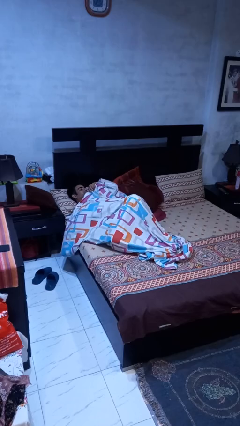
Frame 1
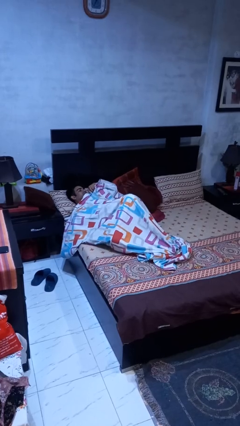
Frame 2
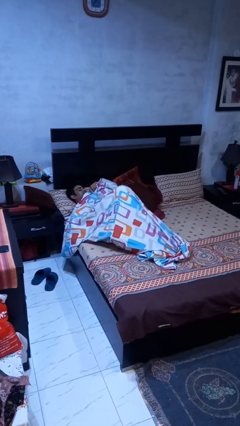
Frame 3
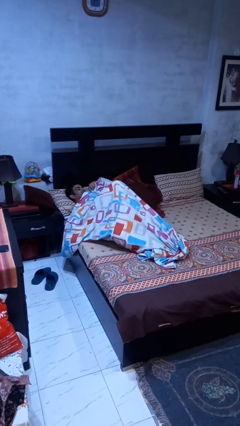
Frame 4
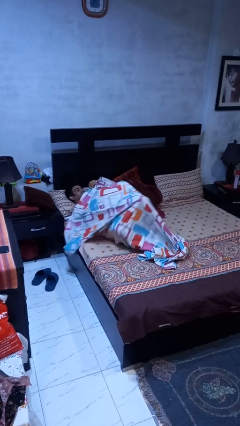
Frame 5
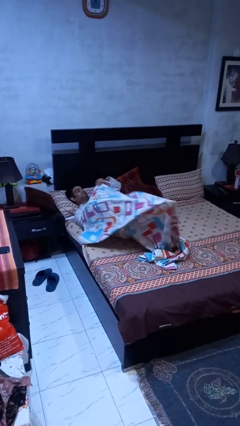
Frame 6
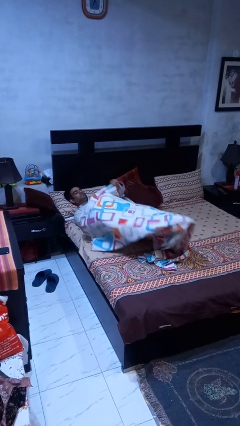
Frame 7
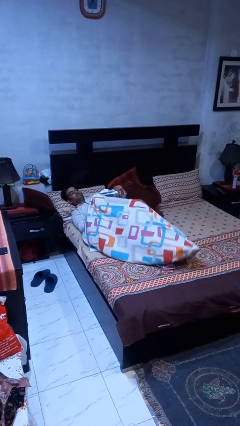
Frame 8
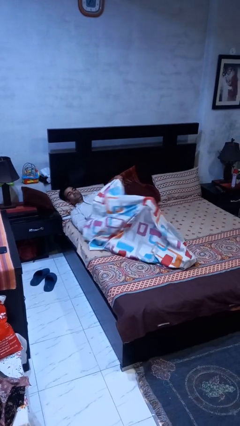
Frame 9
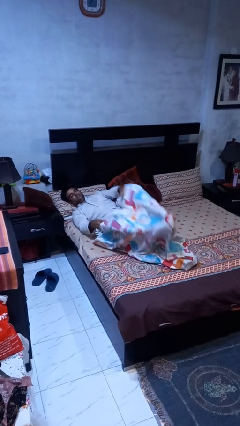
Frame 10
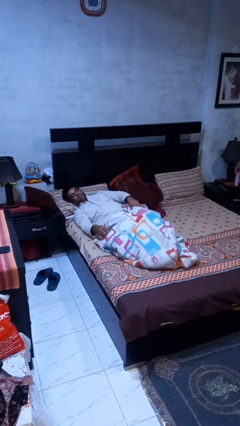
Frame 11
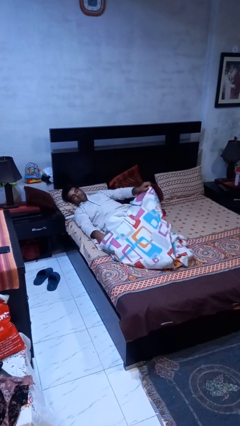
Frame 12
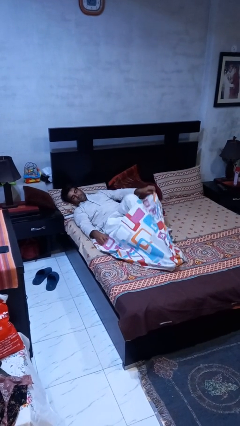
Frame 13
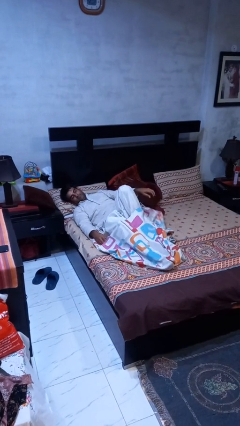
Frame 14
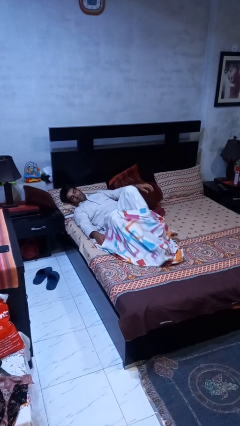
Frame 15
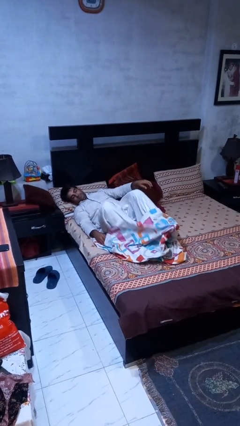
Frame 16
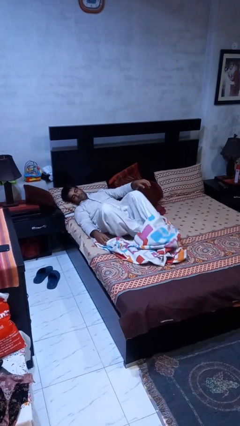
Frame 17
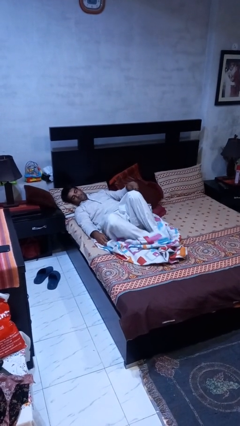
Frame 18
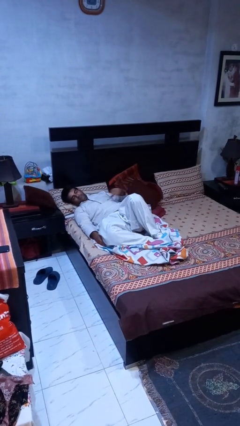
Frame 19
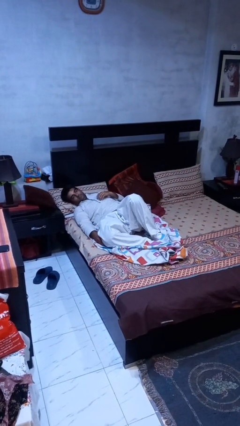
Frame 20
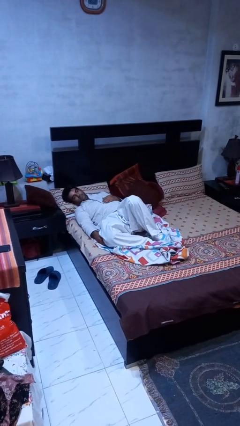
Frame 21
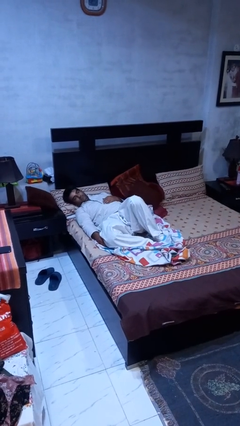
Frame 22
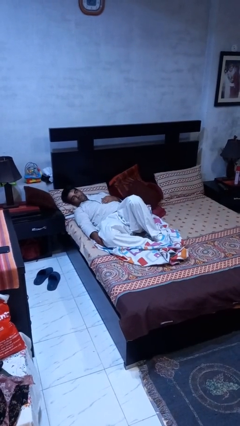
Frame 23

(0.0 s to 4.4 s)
person uncovers with bedsheets

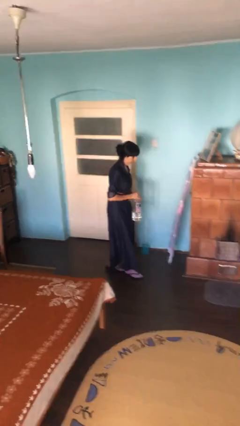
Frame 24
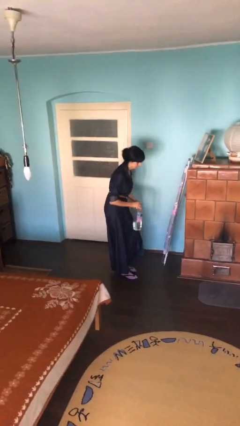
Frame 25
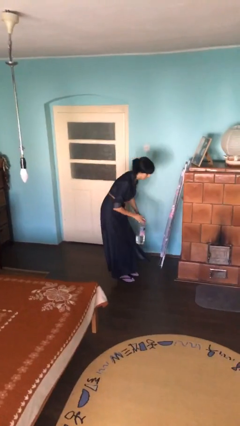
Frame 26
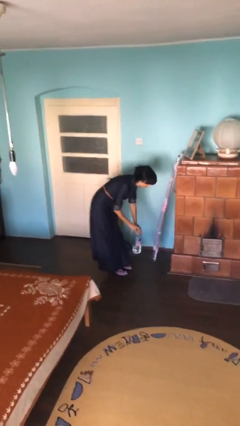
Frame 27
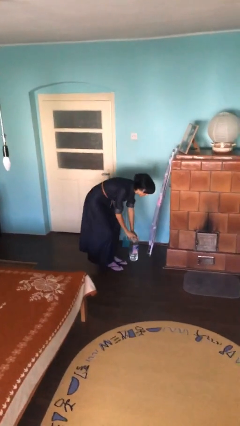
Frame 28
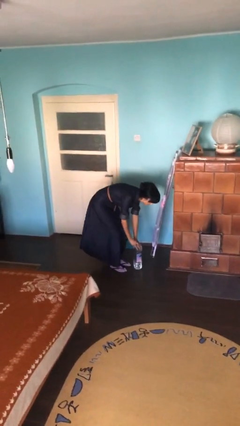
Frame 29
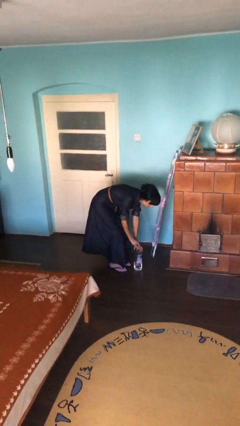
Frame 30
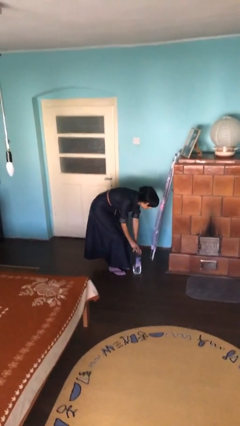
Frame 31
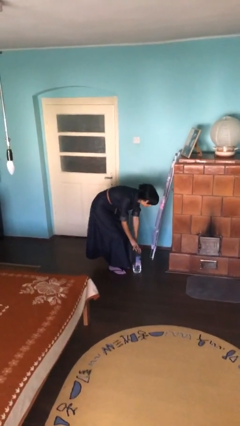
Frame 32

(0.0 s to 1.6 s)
person puts down object on floor

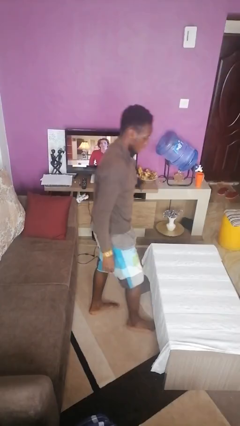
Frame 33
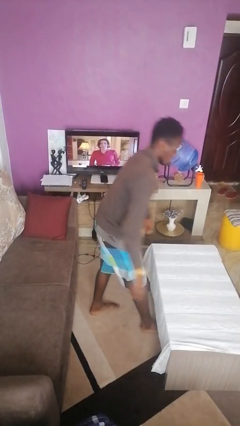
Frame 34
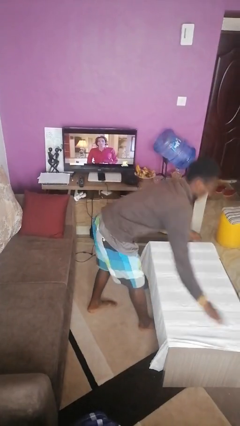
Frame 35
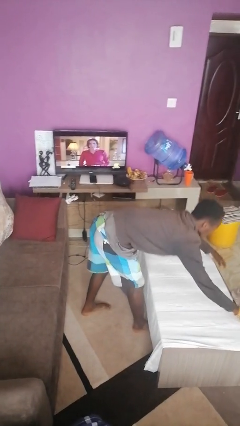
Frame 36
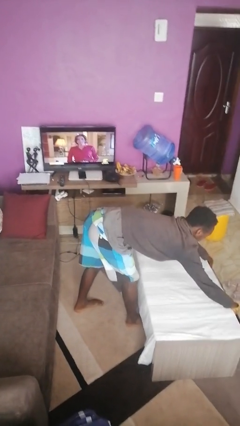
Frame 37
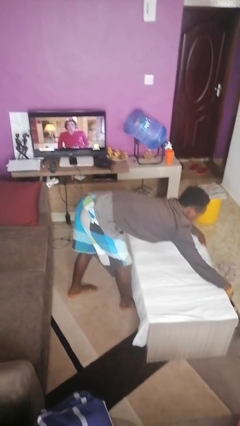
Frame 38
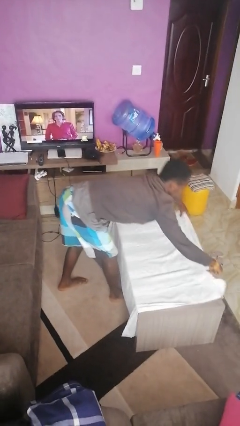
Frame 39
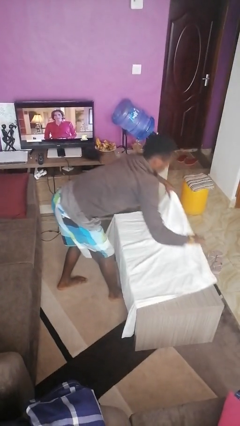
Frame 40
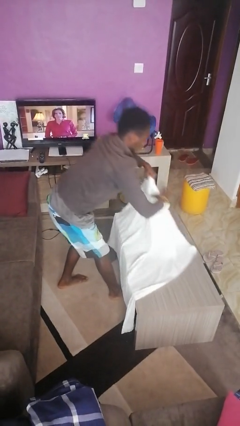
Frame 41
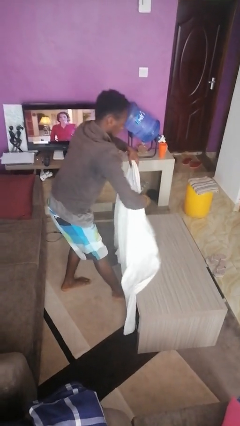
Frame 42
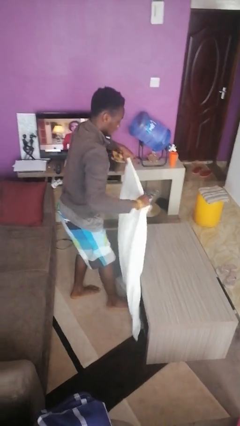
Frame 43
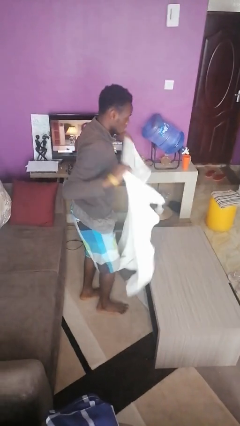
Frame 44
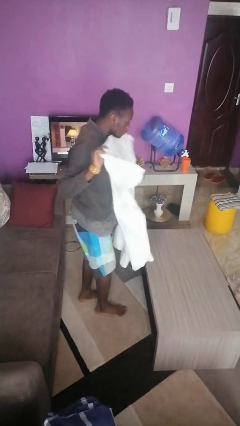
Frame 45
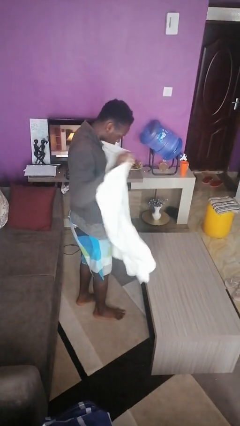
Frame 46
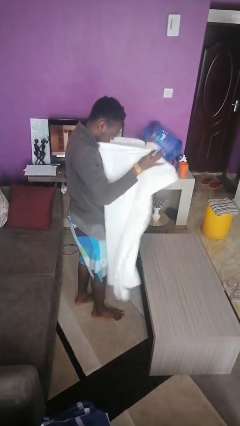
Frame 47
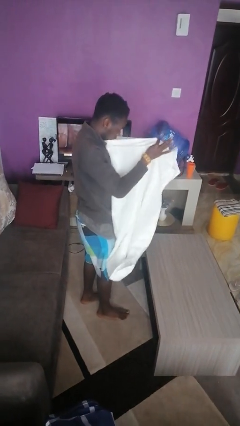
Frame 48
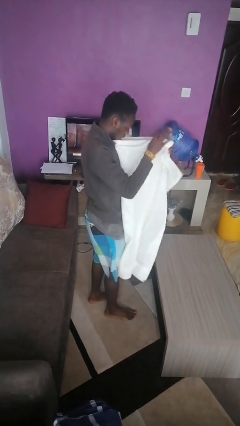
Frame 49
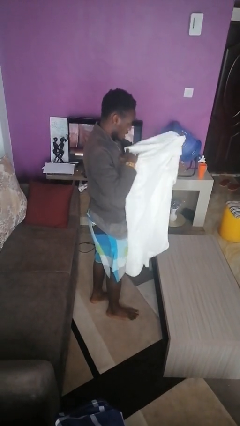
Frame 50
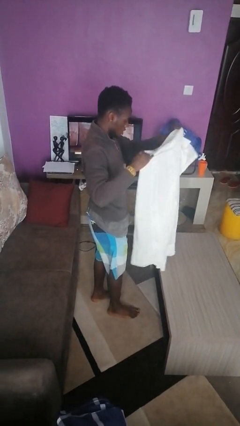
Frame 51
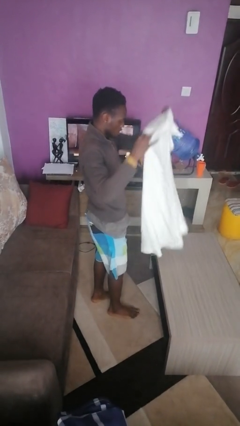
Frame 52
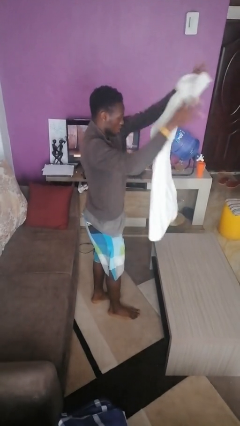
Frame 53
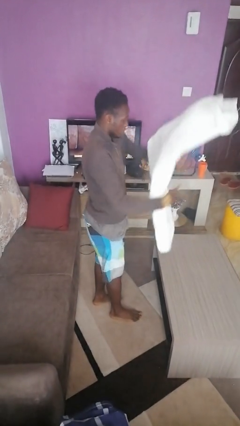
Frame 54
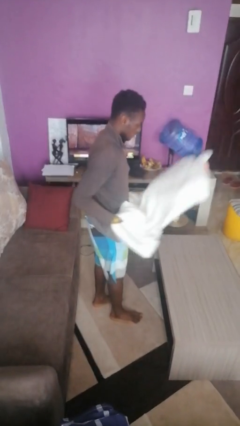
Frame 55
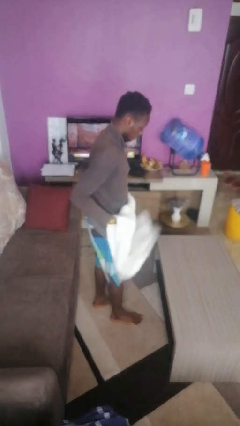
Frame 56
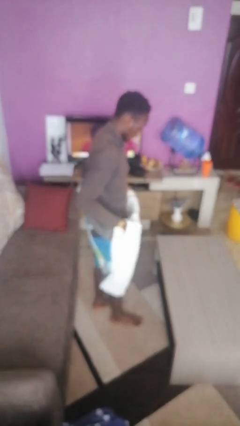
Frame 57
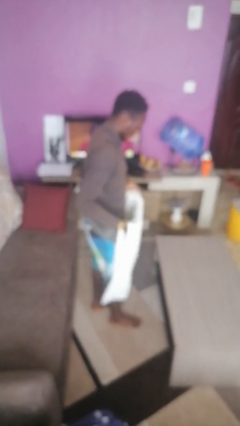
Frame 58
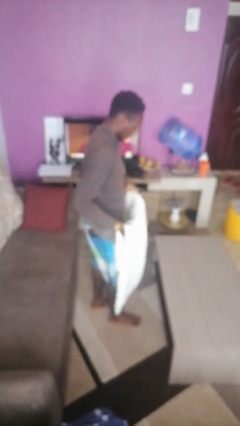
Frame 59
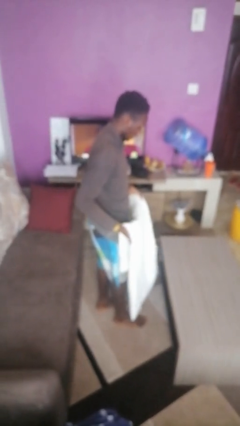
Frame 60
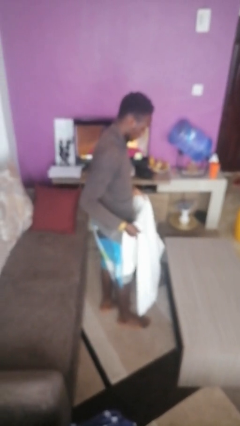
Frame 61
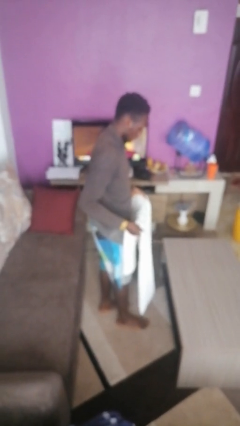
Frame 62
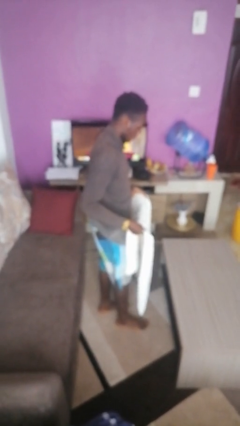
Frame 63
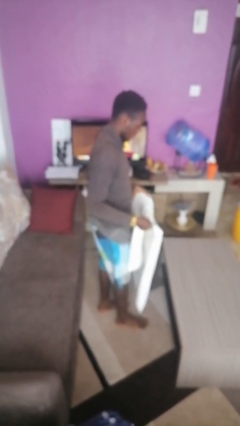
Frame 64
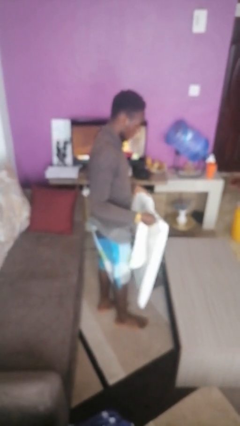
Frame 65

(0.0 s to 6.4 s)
person folds tablecloth

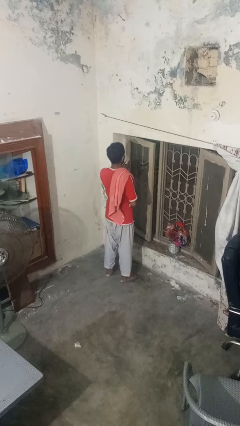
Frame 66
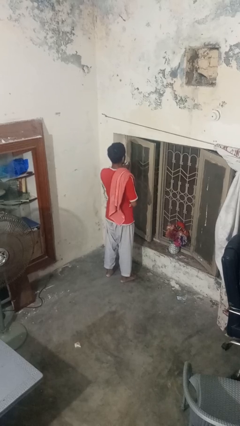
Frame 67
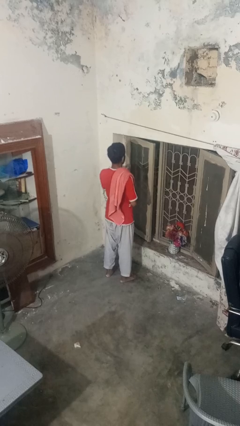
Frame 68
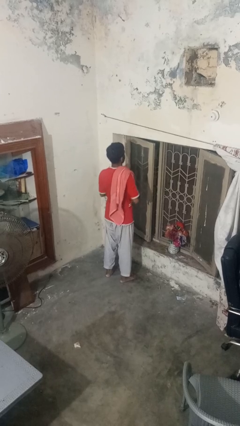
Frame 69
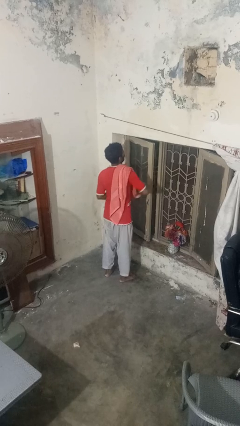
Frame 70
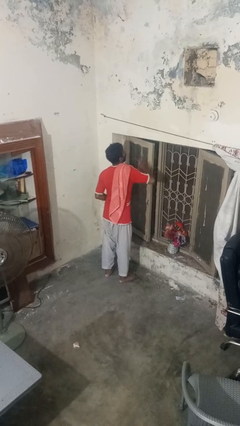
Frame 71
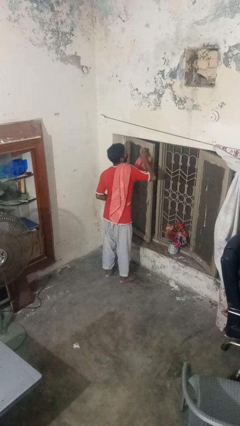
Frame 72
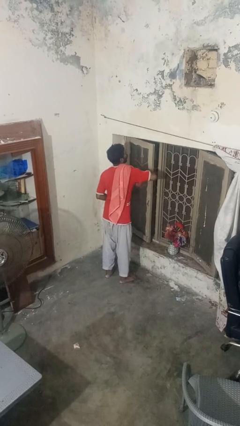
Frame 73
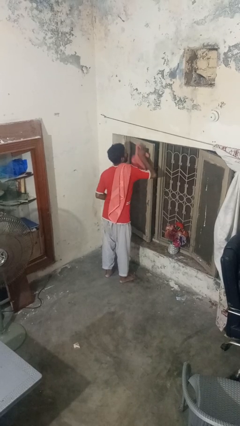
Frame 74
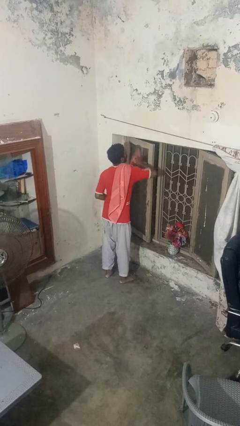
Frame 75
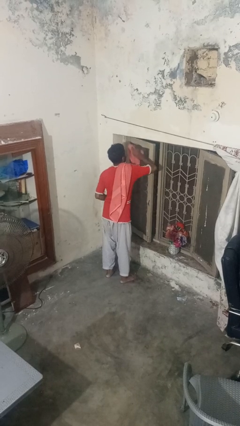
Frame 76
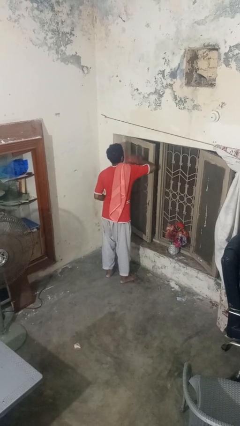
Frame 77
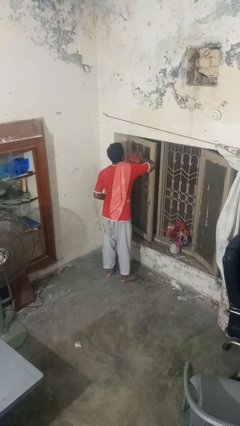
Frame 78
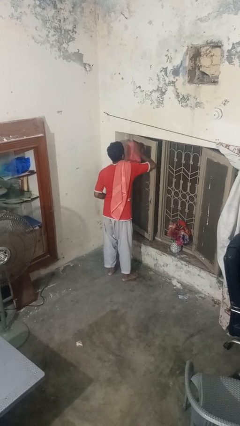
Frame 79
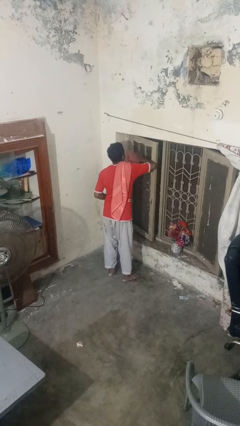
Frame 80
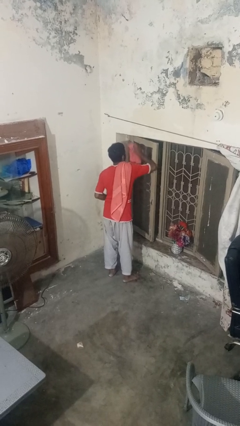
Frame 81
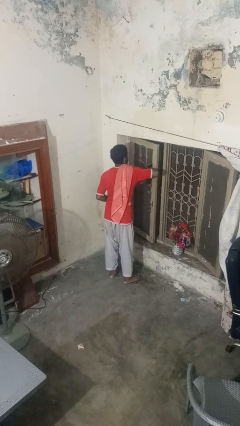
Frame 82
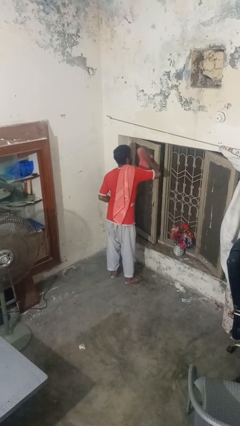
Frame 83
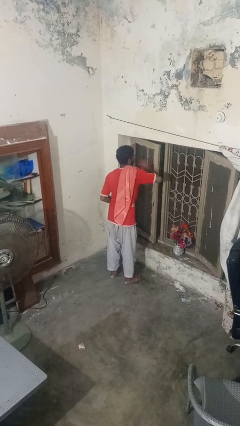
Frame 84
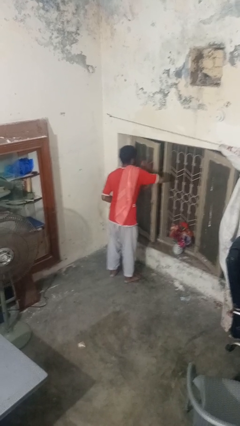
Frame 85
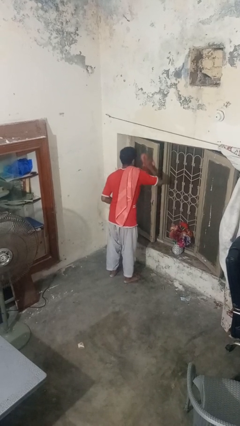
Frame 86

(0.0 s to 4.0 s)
person washes window

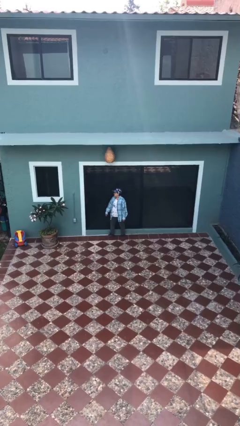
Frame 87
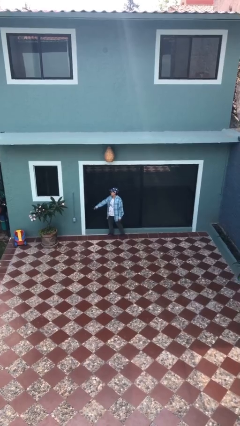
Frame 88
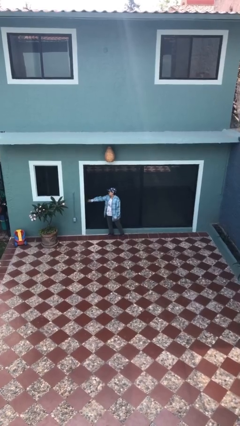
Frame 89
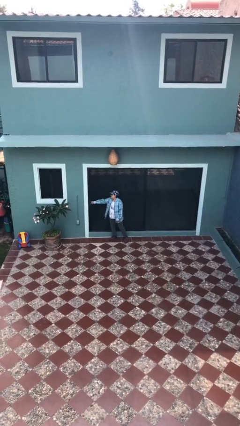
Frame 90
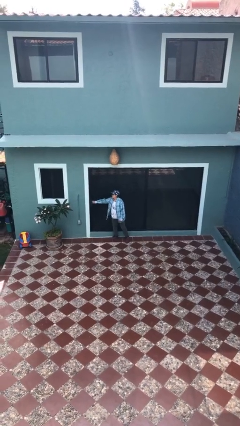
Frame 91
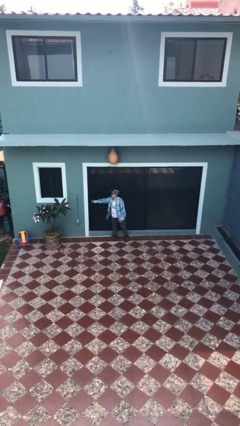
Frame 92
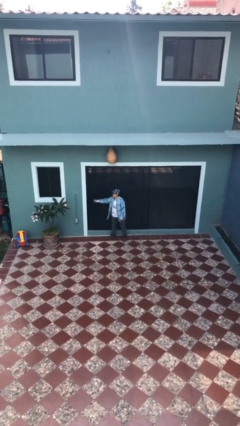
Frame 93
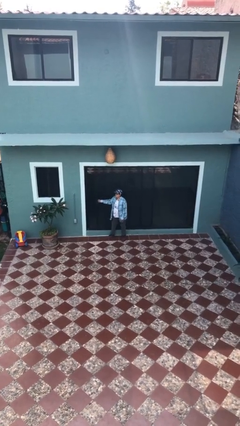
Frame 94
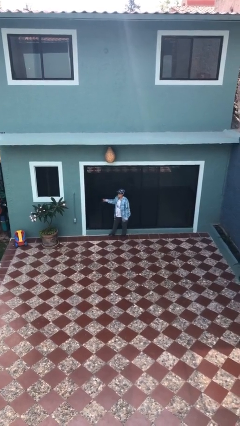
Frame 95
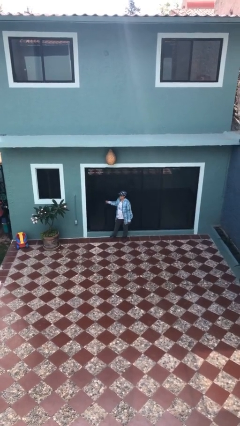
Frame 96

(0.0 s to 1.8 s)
person opens sliding door
